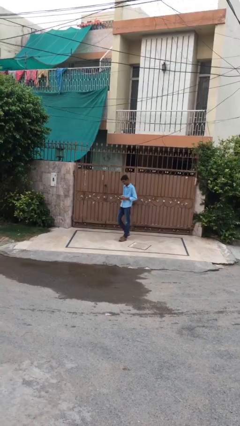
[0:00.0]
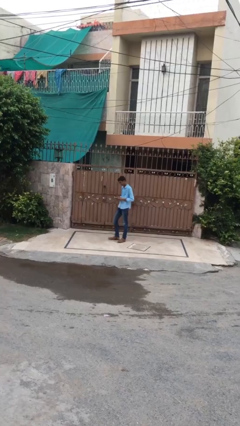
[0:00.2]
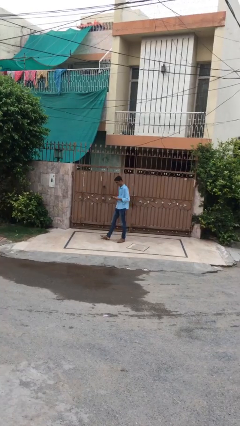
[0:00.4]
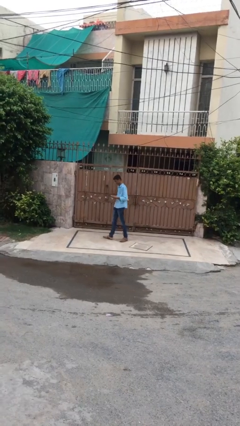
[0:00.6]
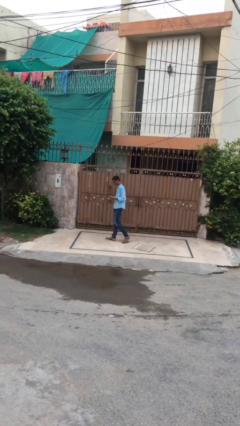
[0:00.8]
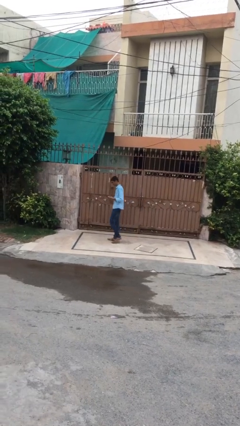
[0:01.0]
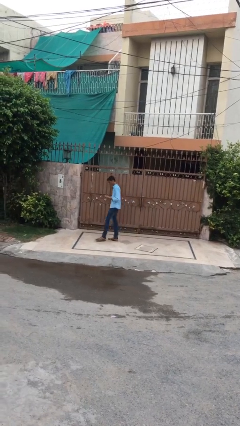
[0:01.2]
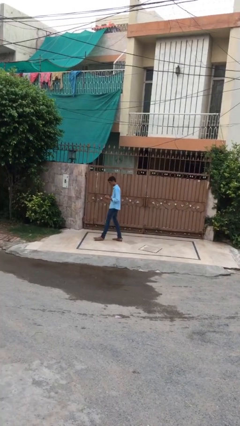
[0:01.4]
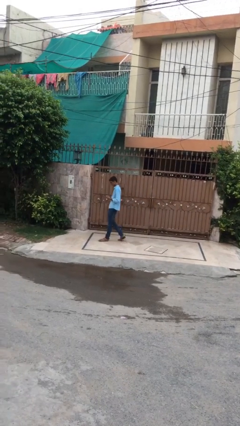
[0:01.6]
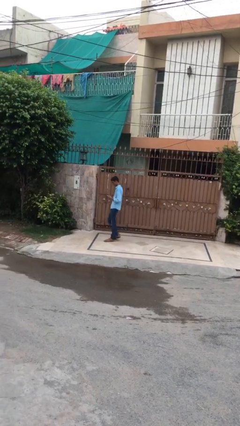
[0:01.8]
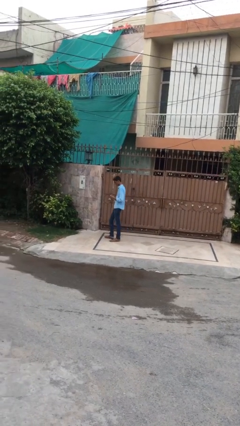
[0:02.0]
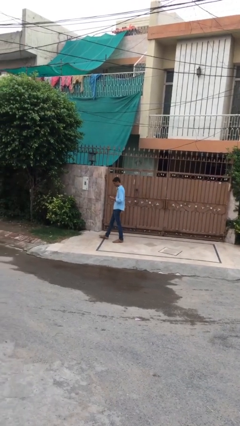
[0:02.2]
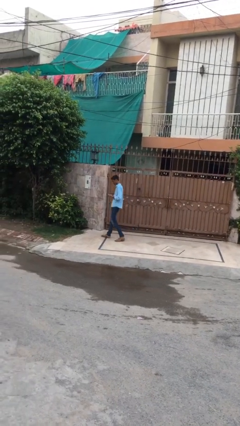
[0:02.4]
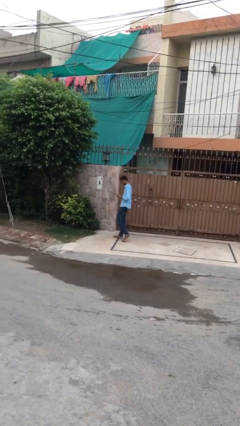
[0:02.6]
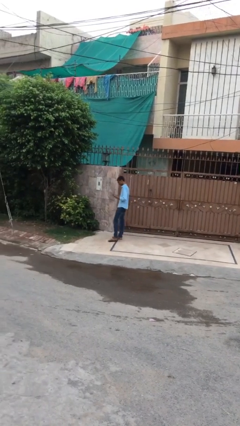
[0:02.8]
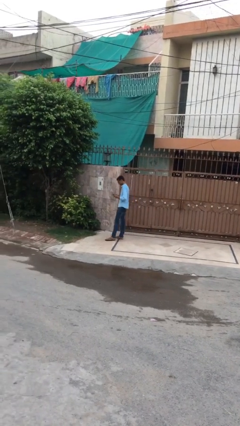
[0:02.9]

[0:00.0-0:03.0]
person texts on phone

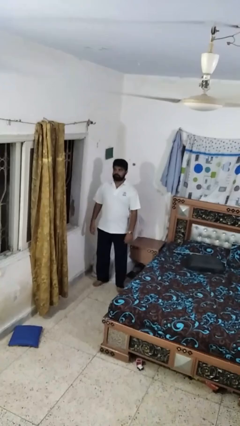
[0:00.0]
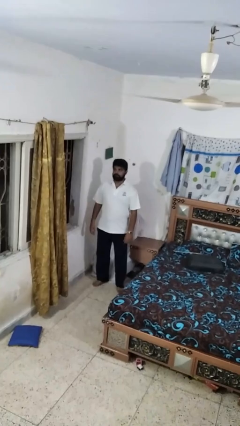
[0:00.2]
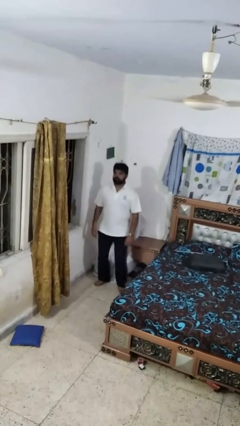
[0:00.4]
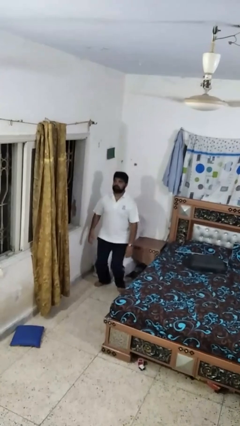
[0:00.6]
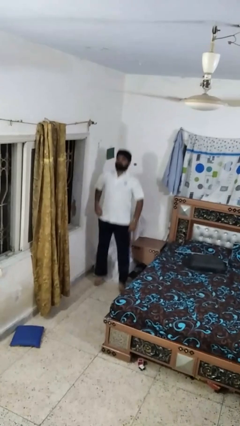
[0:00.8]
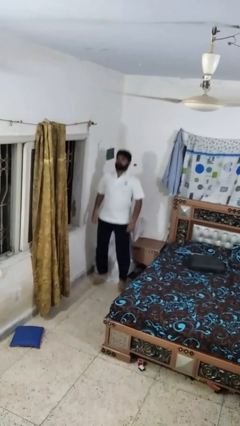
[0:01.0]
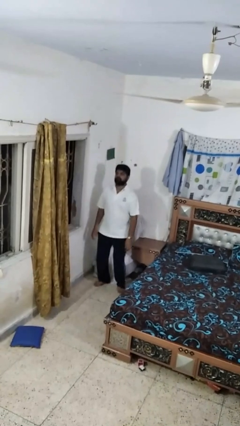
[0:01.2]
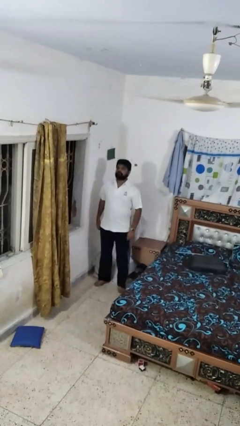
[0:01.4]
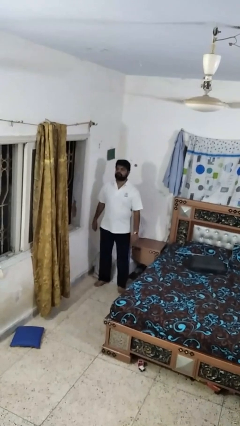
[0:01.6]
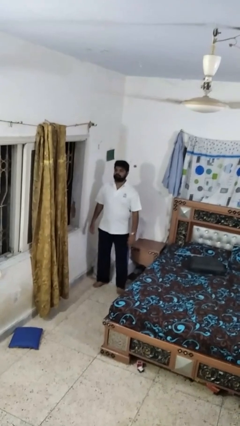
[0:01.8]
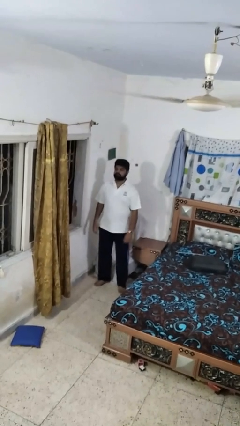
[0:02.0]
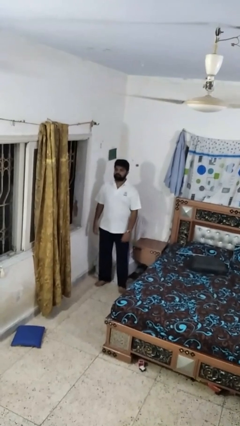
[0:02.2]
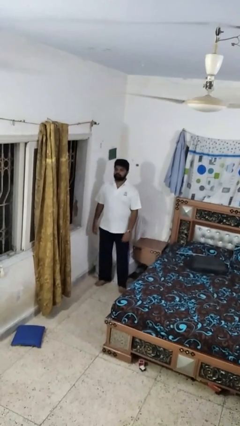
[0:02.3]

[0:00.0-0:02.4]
person jumps

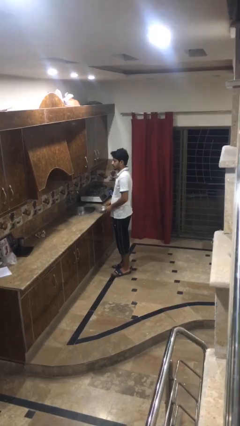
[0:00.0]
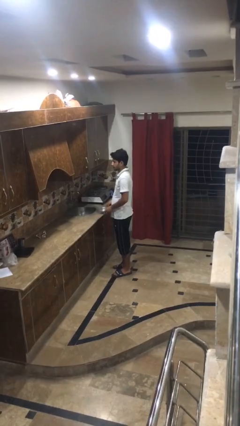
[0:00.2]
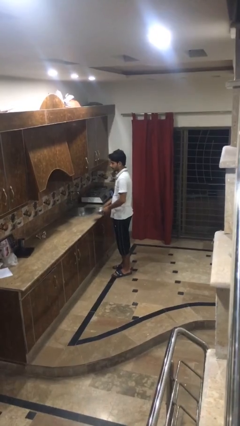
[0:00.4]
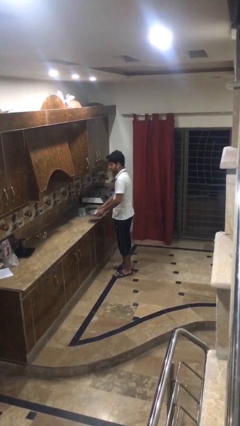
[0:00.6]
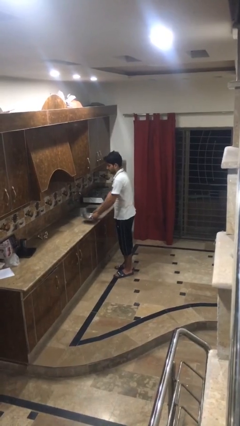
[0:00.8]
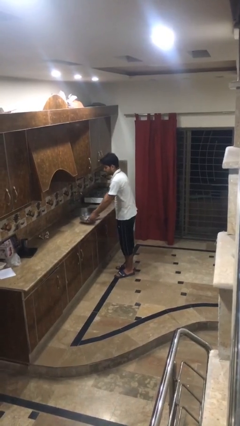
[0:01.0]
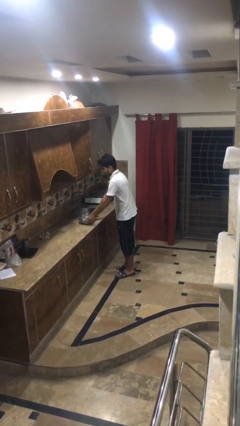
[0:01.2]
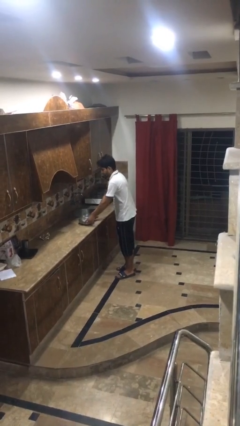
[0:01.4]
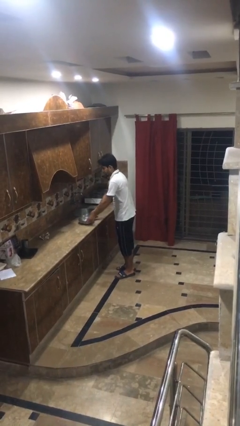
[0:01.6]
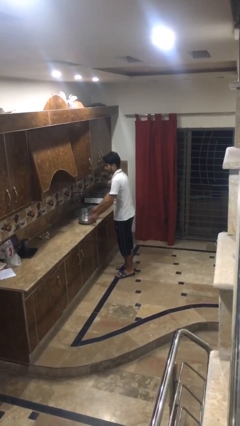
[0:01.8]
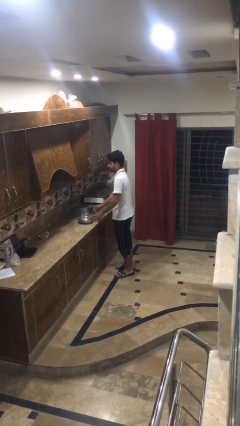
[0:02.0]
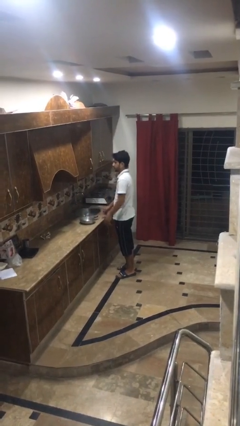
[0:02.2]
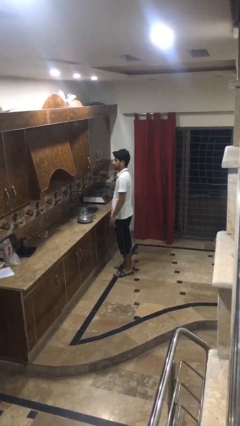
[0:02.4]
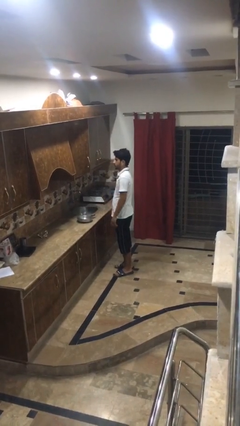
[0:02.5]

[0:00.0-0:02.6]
person puts down object on countertop

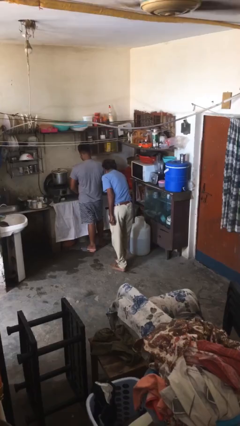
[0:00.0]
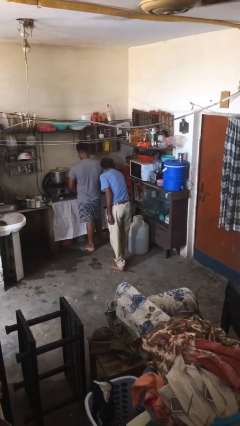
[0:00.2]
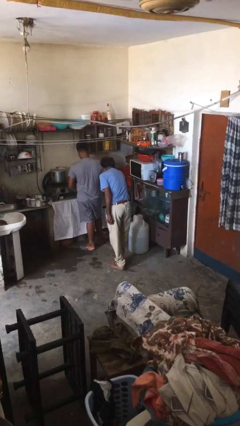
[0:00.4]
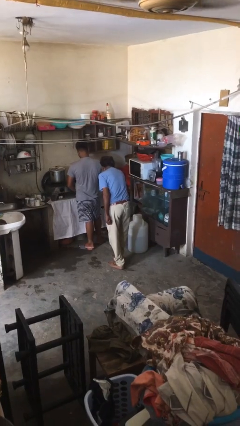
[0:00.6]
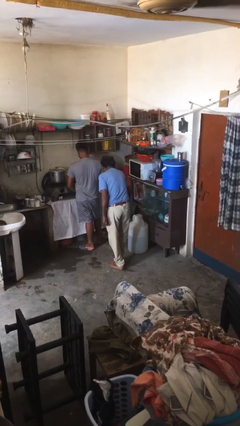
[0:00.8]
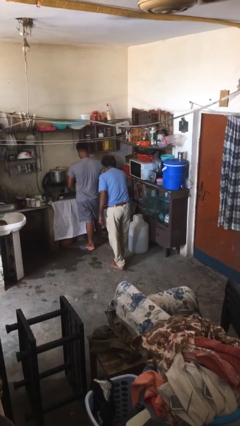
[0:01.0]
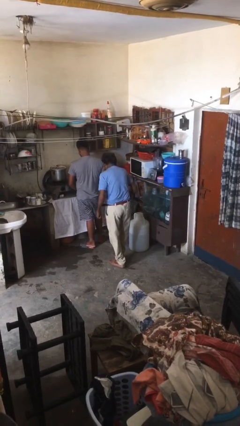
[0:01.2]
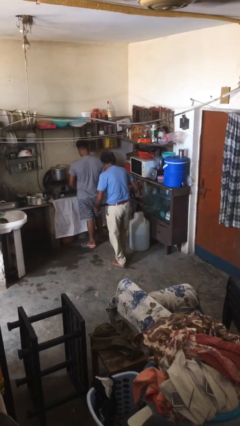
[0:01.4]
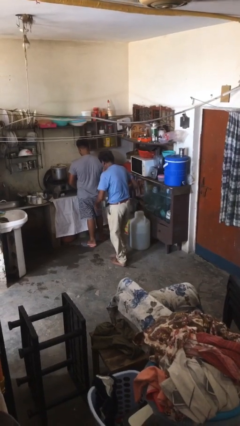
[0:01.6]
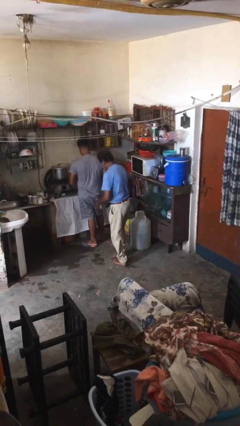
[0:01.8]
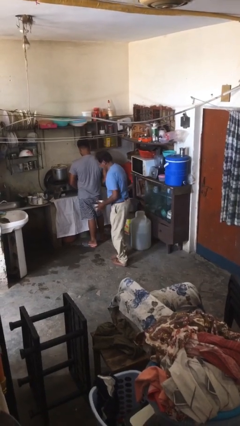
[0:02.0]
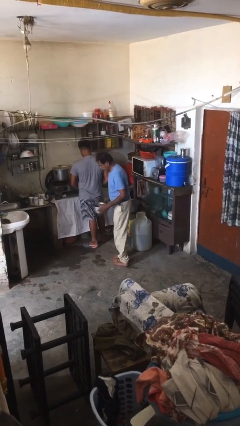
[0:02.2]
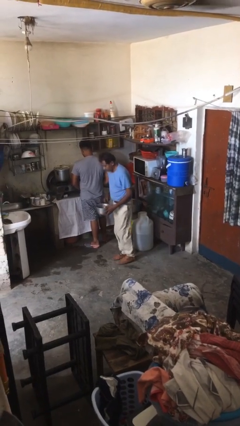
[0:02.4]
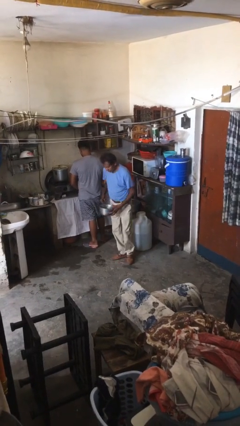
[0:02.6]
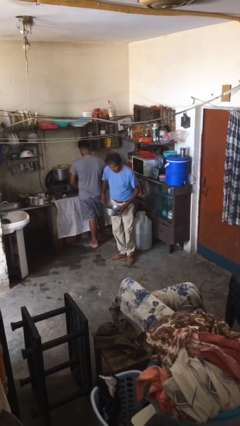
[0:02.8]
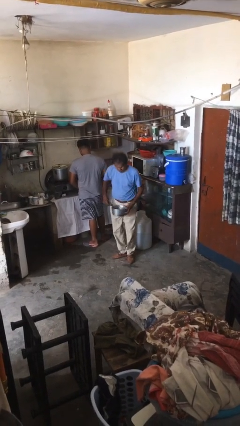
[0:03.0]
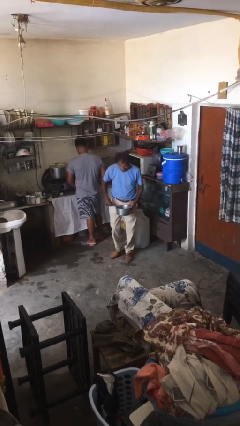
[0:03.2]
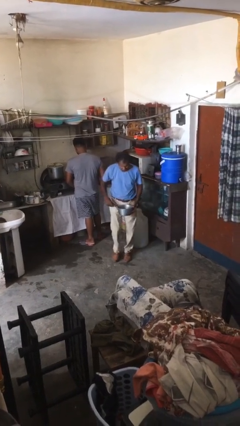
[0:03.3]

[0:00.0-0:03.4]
person steals object from person

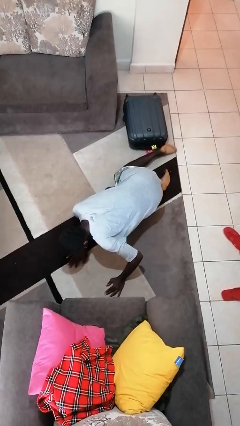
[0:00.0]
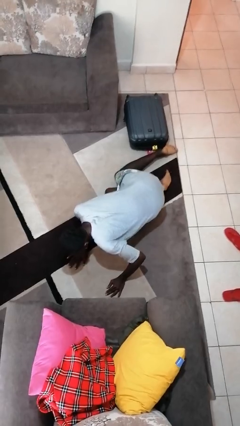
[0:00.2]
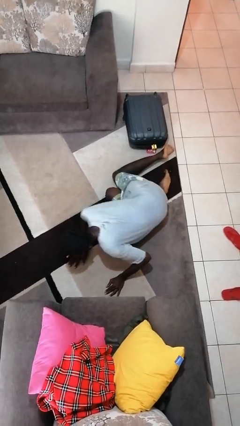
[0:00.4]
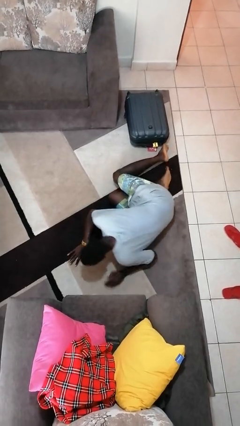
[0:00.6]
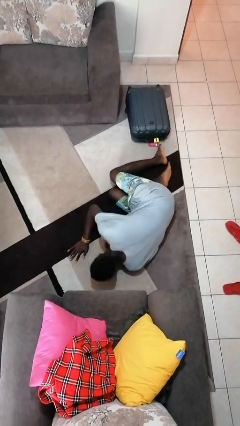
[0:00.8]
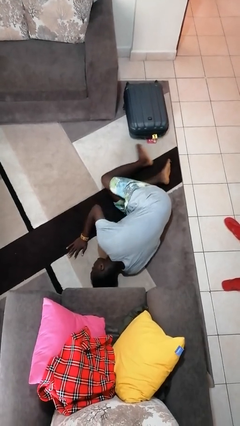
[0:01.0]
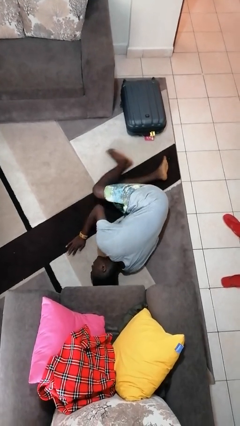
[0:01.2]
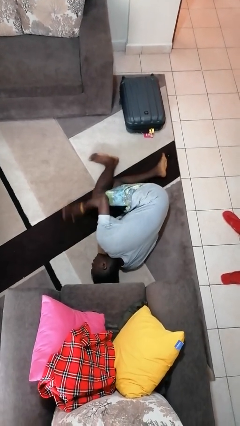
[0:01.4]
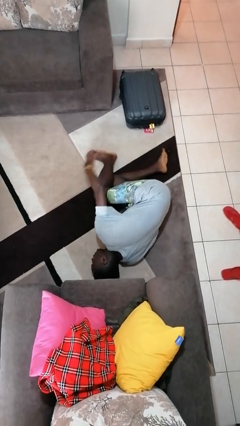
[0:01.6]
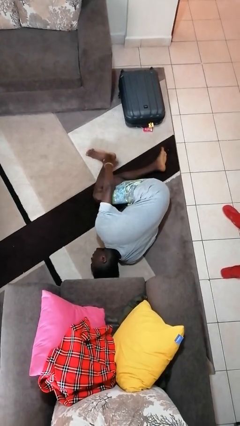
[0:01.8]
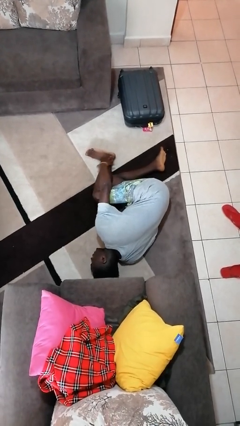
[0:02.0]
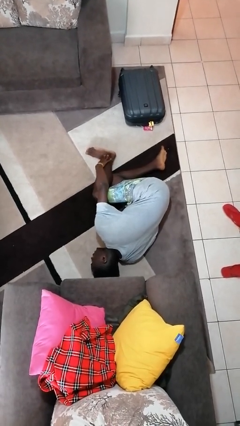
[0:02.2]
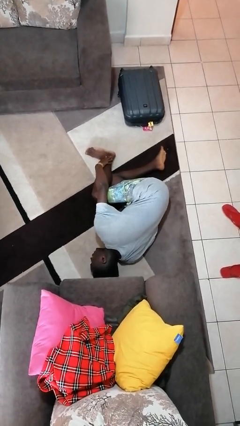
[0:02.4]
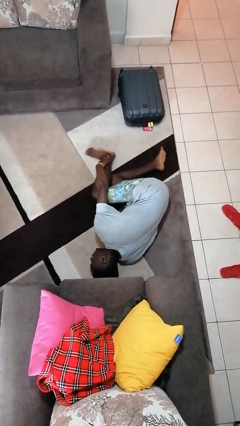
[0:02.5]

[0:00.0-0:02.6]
person lies down on floor

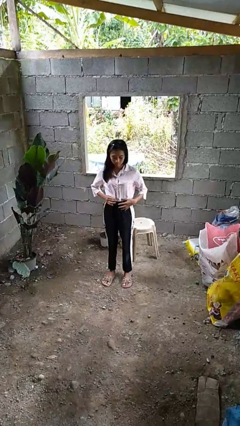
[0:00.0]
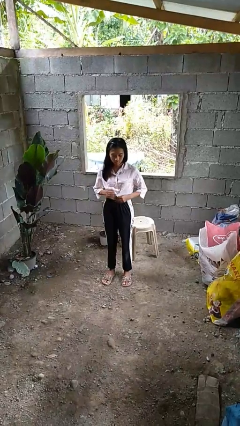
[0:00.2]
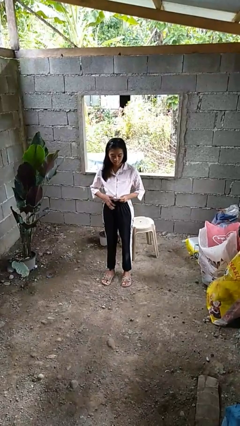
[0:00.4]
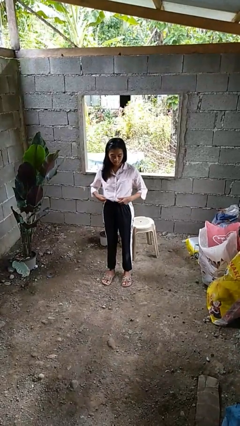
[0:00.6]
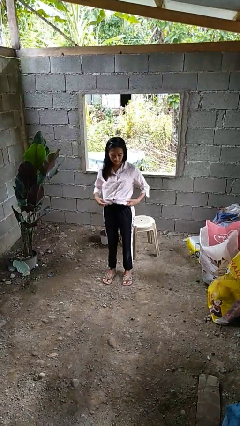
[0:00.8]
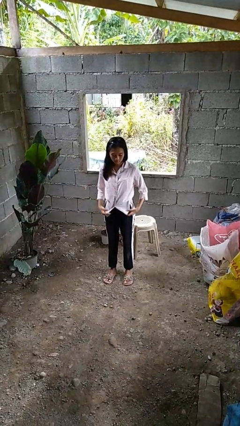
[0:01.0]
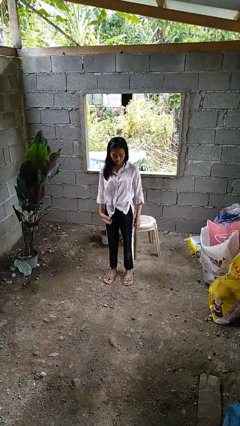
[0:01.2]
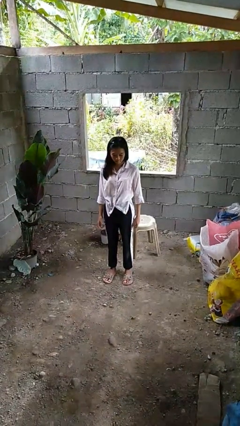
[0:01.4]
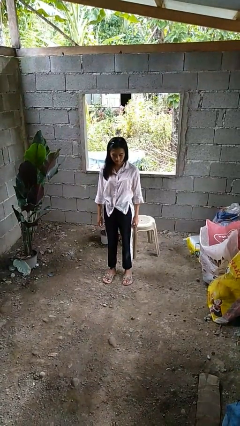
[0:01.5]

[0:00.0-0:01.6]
person untucks shirt

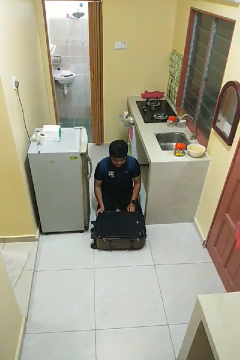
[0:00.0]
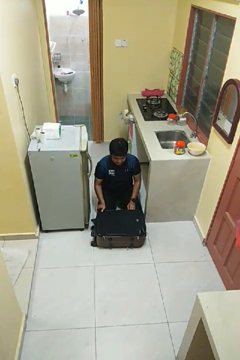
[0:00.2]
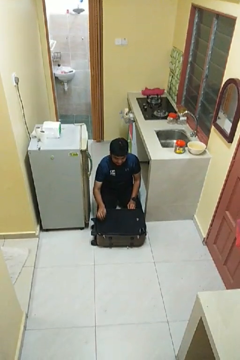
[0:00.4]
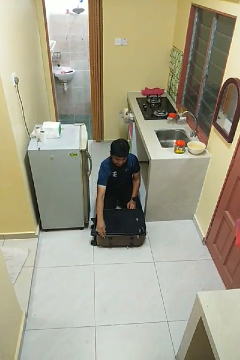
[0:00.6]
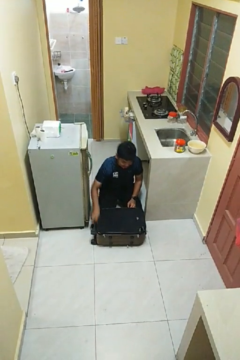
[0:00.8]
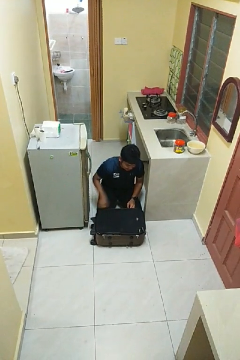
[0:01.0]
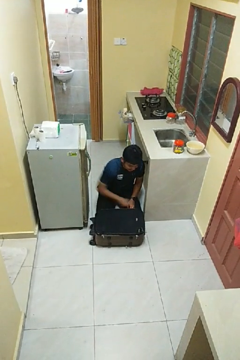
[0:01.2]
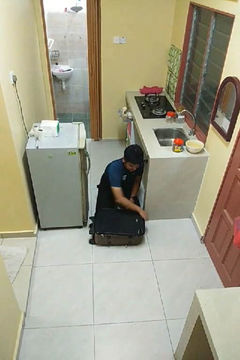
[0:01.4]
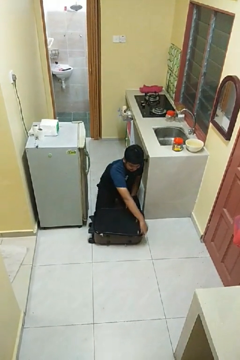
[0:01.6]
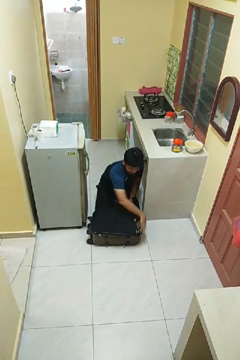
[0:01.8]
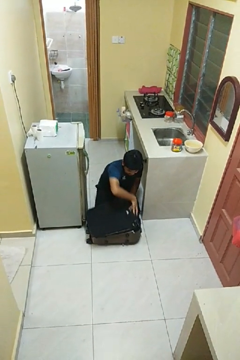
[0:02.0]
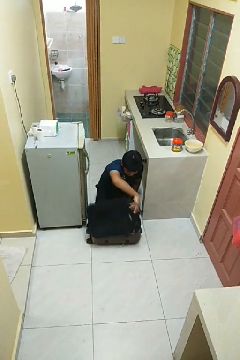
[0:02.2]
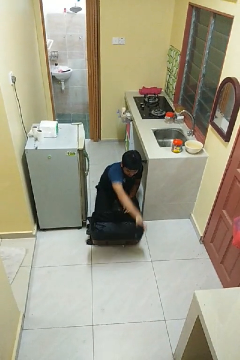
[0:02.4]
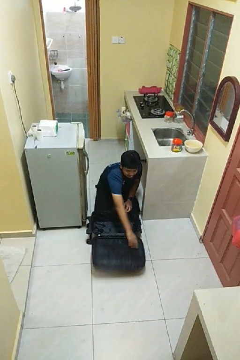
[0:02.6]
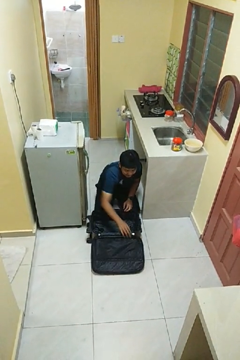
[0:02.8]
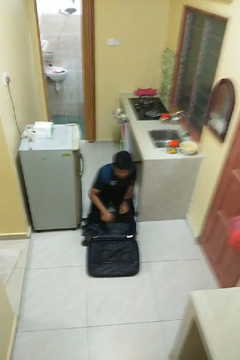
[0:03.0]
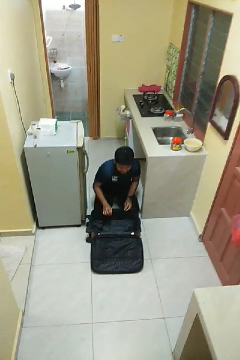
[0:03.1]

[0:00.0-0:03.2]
person opens suitcase
